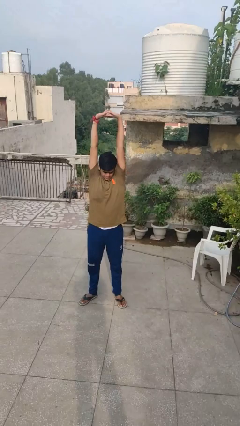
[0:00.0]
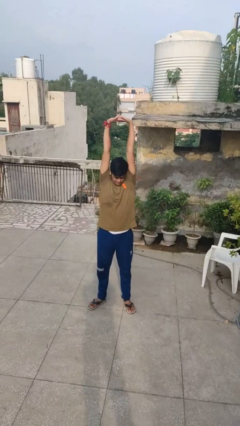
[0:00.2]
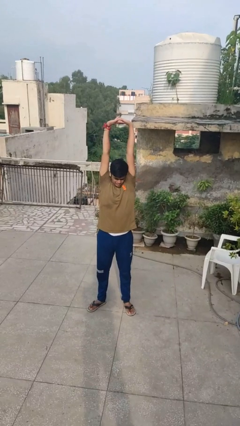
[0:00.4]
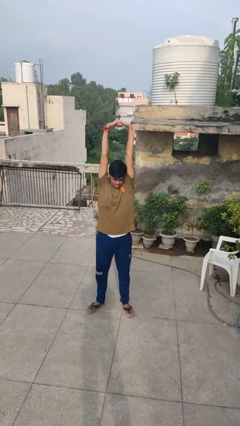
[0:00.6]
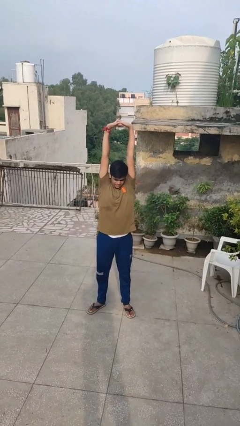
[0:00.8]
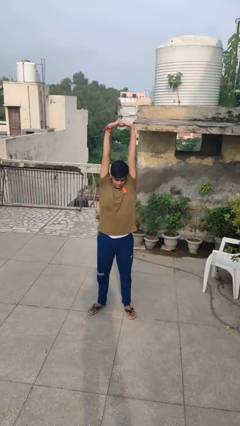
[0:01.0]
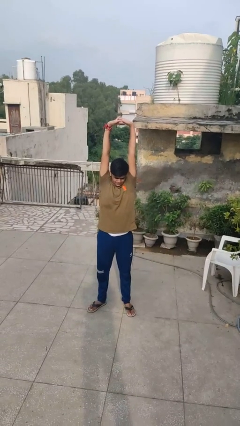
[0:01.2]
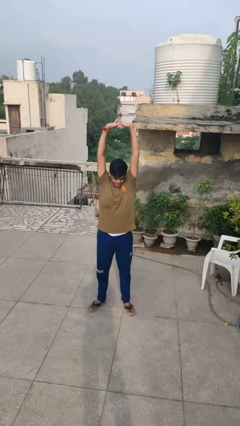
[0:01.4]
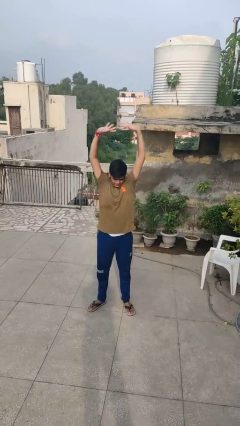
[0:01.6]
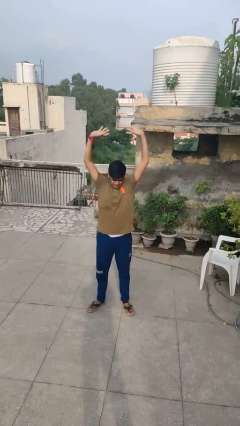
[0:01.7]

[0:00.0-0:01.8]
person stretches arms over head

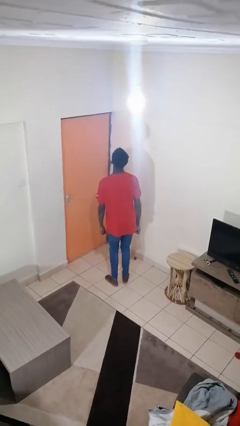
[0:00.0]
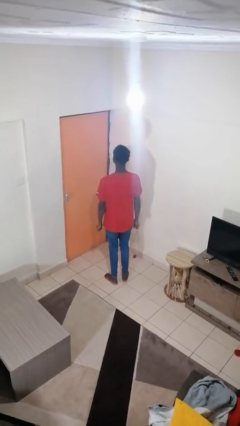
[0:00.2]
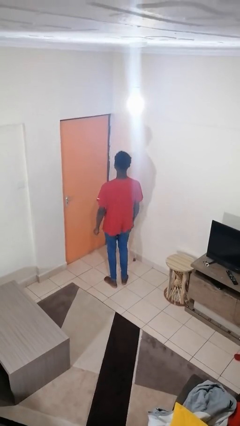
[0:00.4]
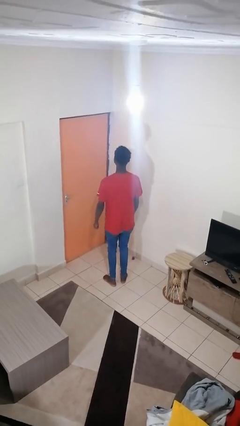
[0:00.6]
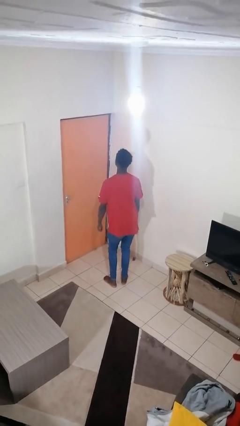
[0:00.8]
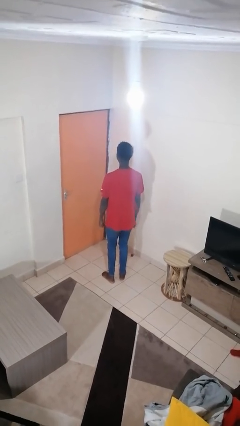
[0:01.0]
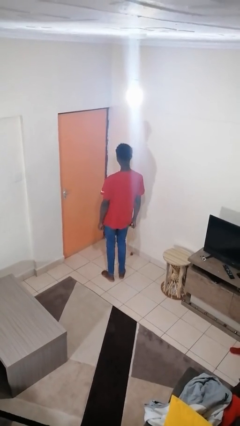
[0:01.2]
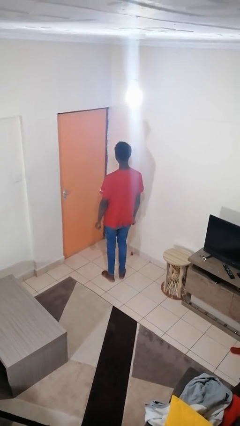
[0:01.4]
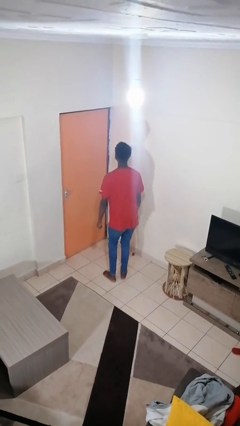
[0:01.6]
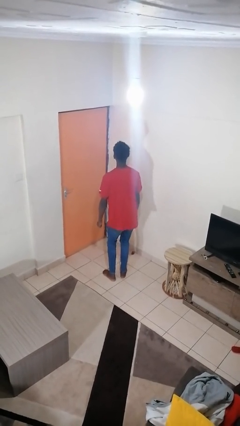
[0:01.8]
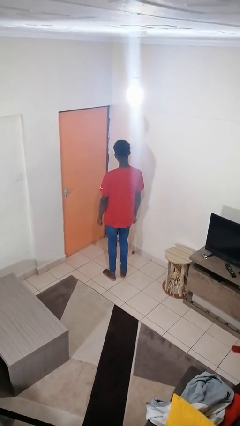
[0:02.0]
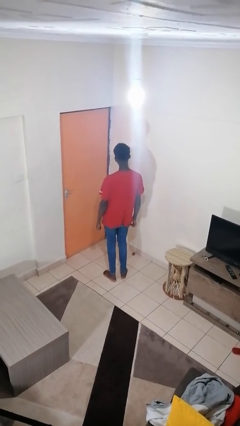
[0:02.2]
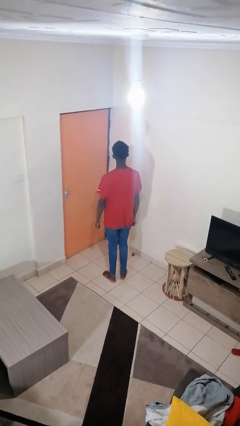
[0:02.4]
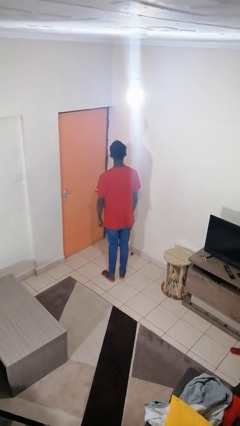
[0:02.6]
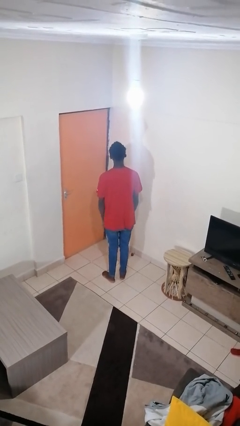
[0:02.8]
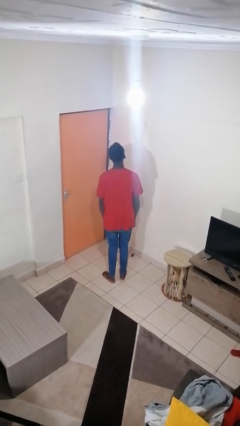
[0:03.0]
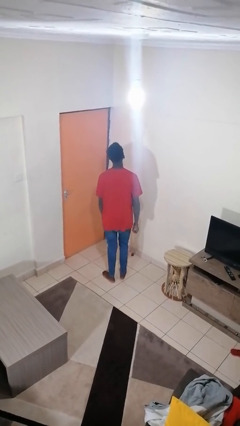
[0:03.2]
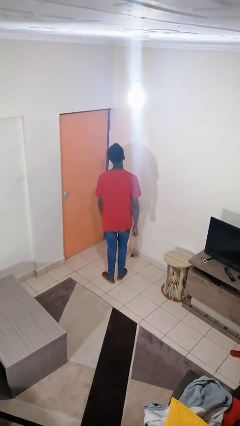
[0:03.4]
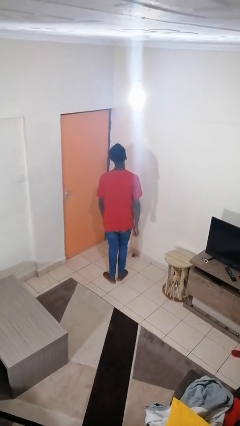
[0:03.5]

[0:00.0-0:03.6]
person wiggles hips

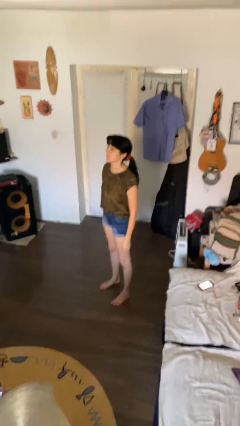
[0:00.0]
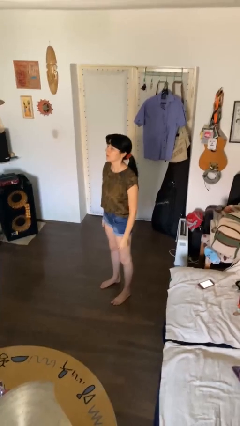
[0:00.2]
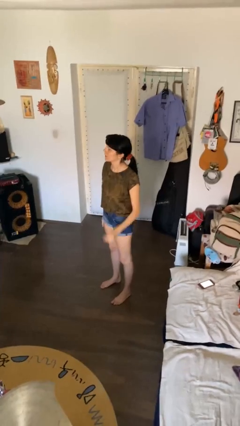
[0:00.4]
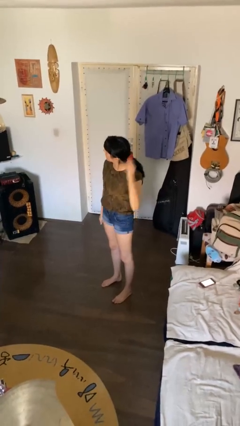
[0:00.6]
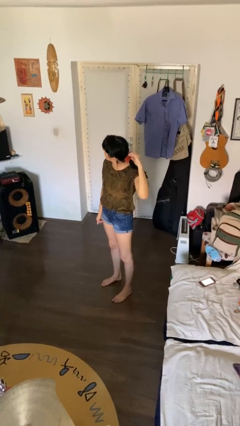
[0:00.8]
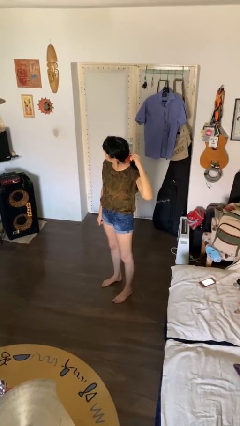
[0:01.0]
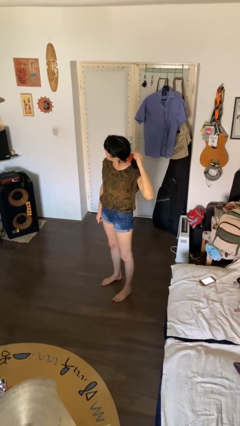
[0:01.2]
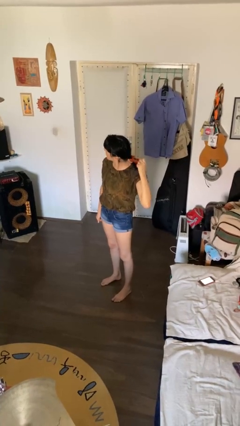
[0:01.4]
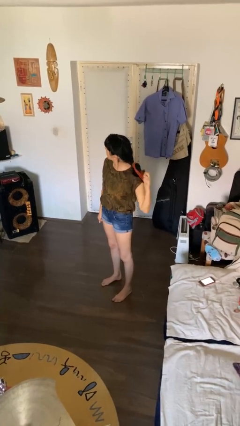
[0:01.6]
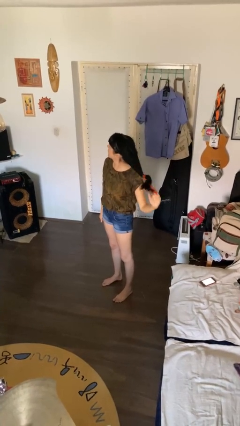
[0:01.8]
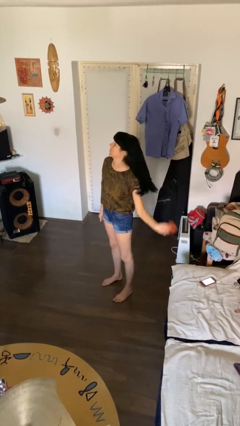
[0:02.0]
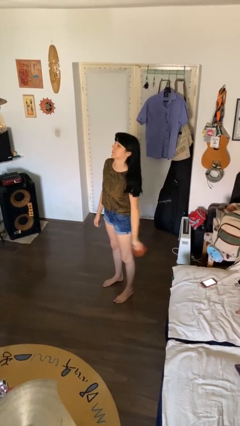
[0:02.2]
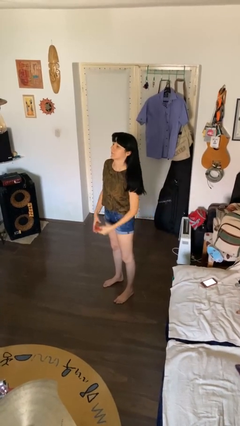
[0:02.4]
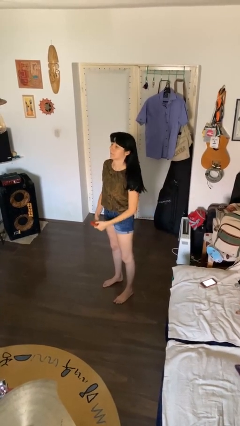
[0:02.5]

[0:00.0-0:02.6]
person takes off hairtie

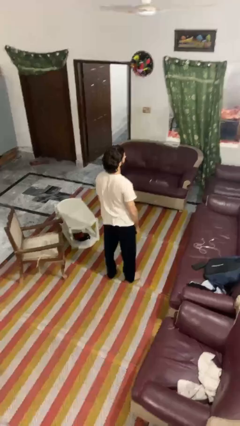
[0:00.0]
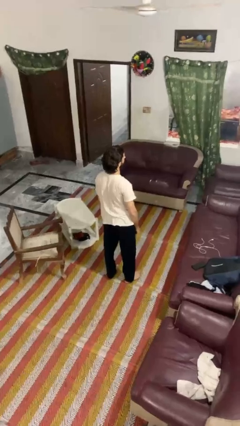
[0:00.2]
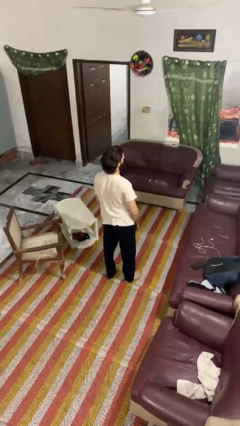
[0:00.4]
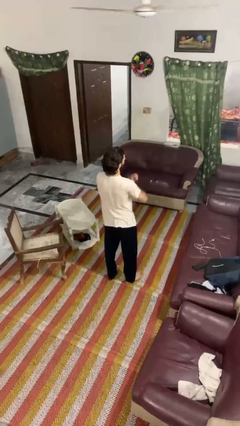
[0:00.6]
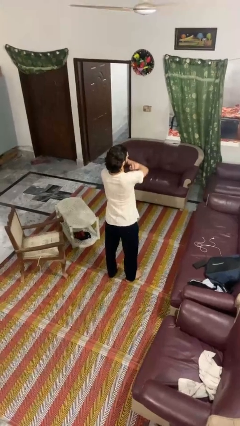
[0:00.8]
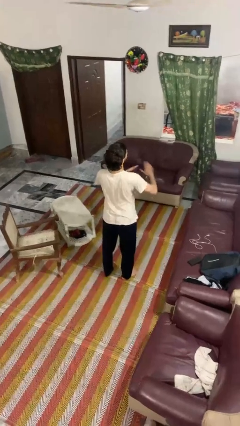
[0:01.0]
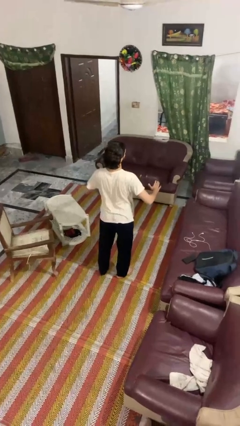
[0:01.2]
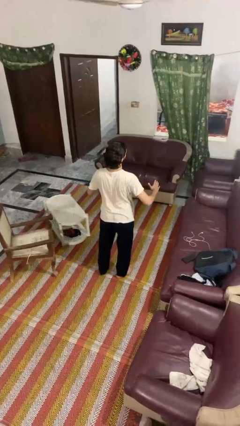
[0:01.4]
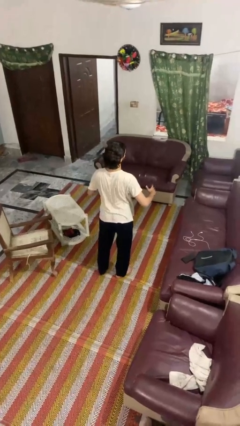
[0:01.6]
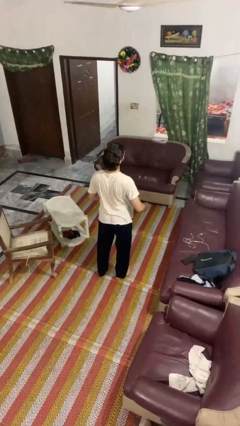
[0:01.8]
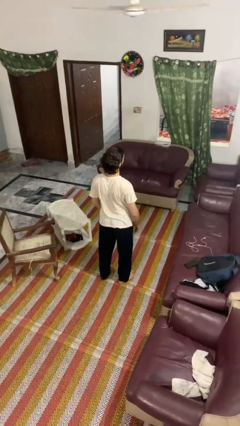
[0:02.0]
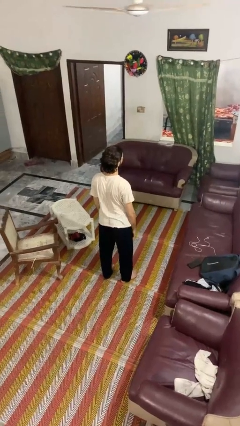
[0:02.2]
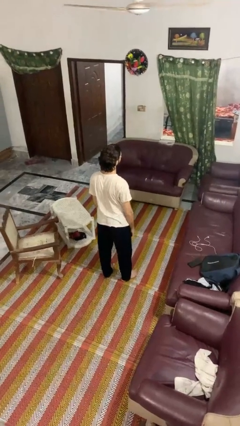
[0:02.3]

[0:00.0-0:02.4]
person karate chop

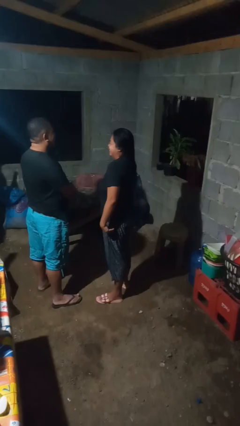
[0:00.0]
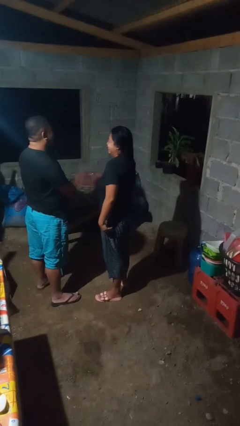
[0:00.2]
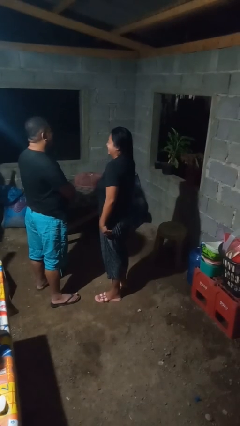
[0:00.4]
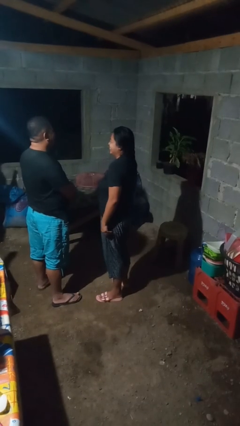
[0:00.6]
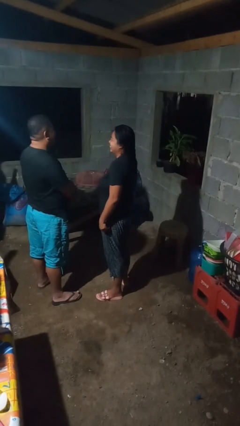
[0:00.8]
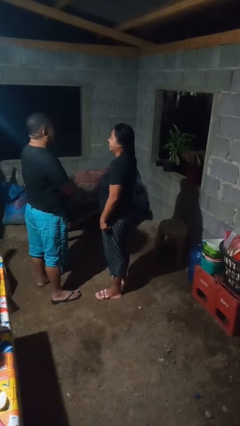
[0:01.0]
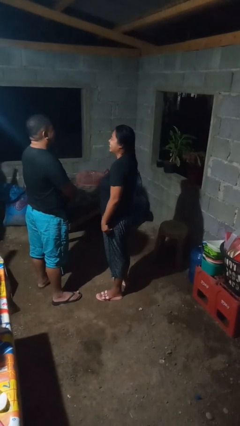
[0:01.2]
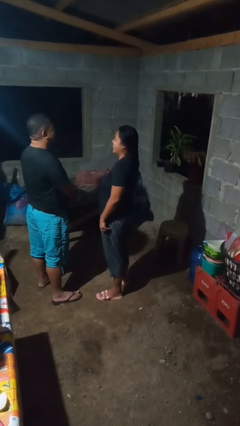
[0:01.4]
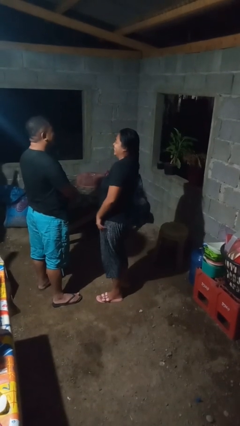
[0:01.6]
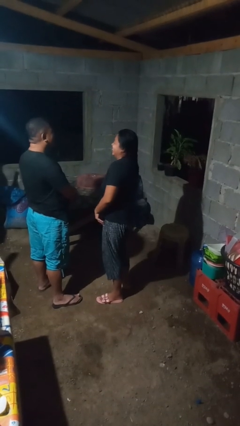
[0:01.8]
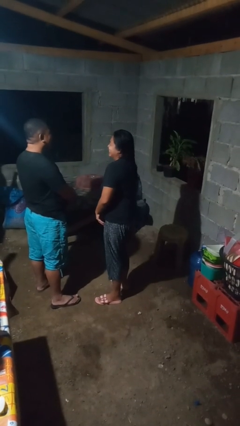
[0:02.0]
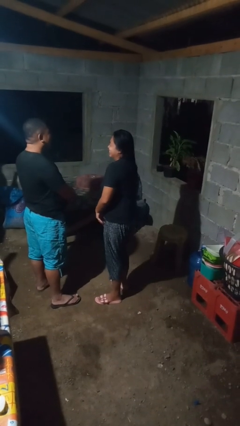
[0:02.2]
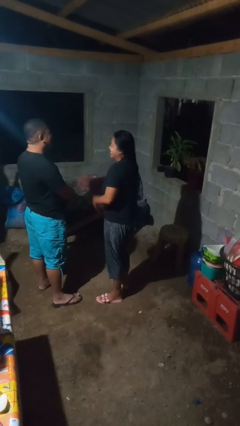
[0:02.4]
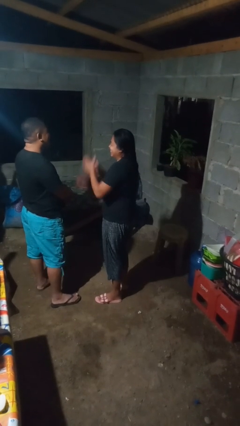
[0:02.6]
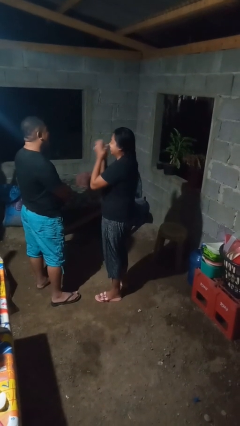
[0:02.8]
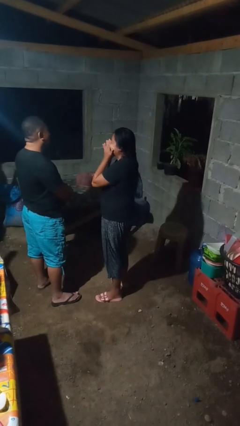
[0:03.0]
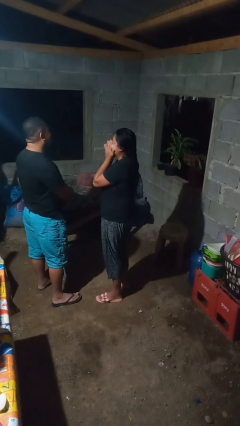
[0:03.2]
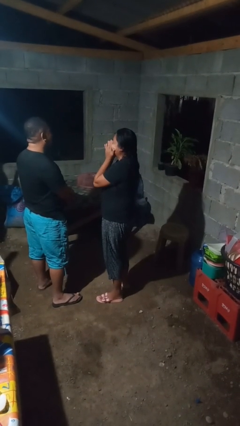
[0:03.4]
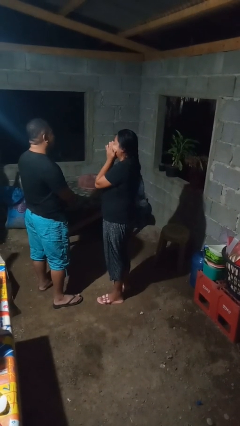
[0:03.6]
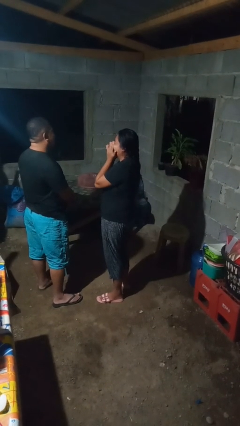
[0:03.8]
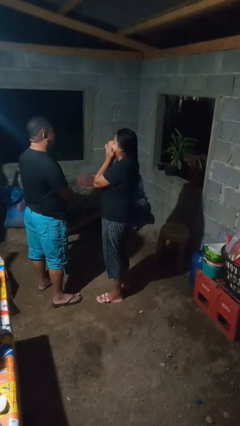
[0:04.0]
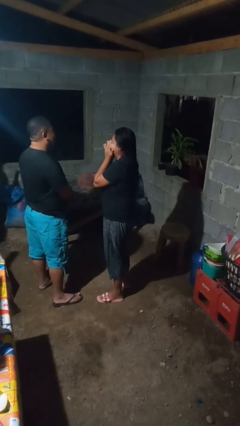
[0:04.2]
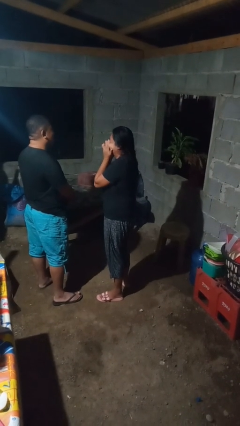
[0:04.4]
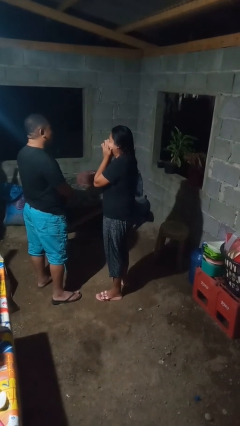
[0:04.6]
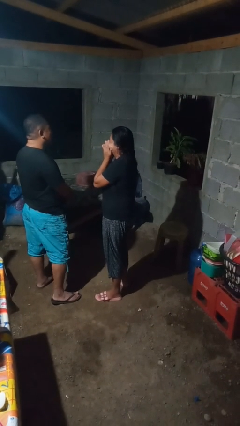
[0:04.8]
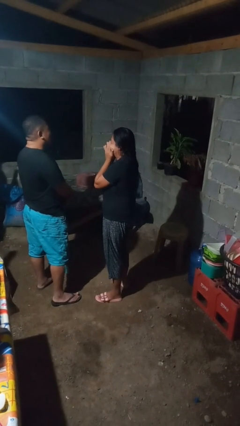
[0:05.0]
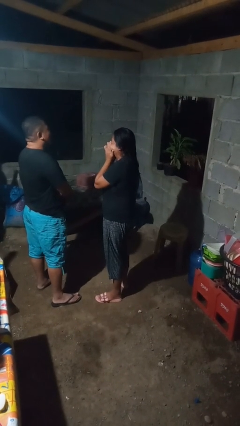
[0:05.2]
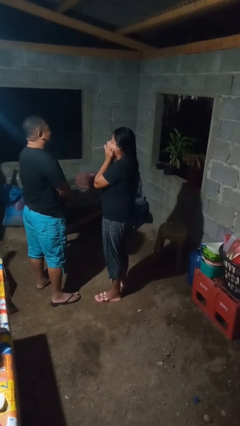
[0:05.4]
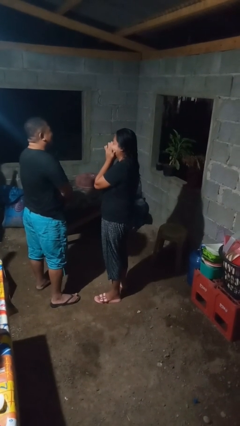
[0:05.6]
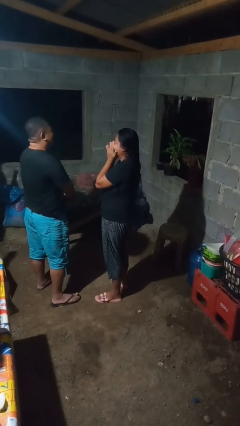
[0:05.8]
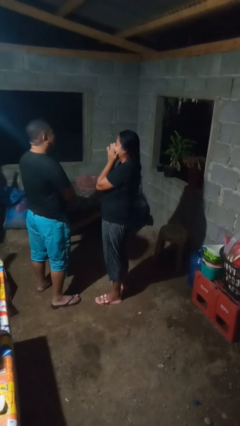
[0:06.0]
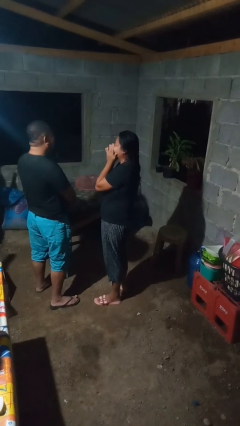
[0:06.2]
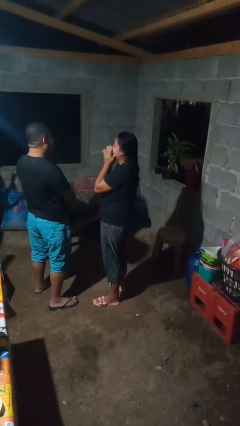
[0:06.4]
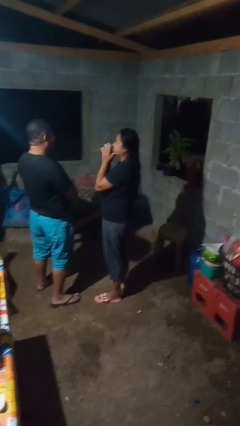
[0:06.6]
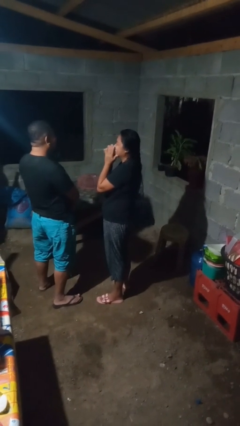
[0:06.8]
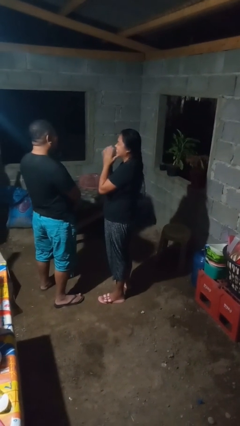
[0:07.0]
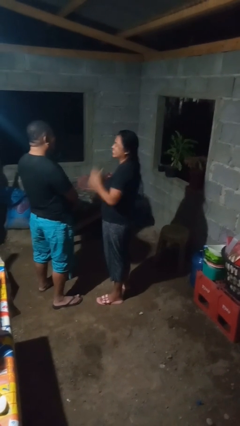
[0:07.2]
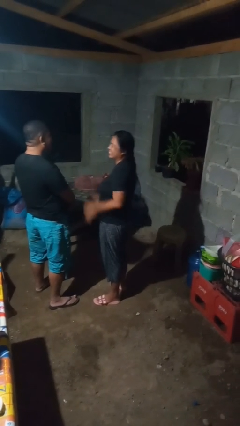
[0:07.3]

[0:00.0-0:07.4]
person laughs with person
